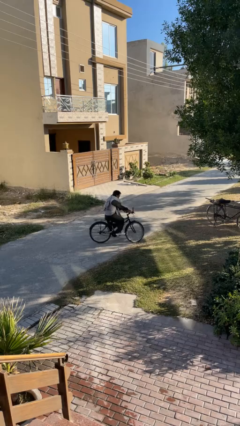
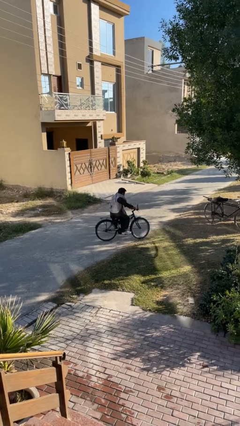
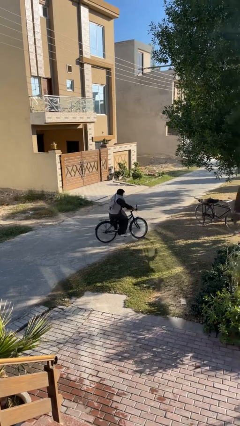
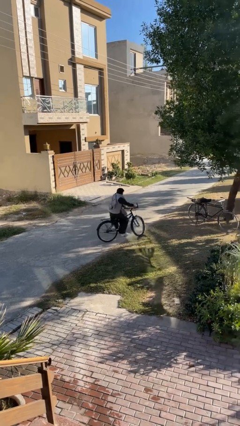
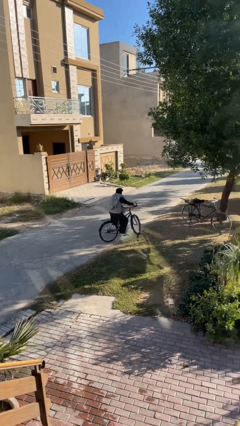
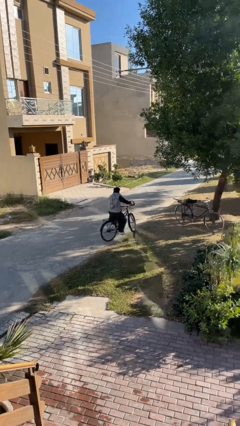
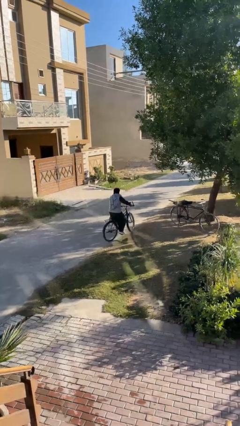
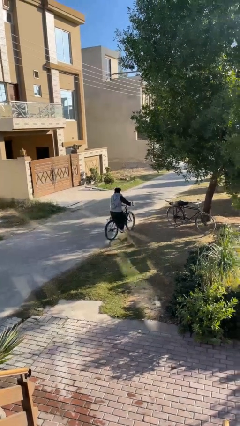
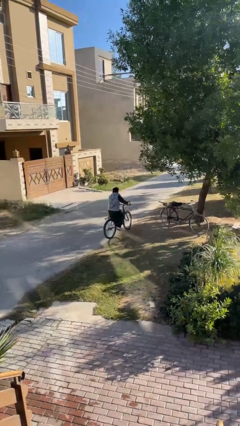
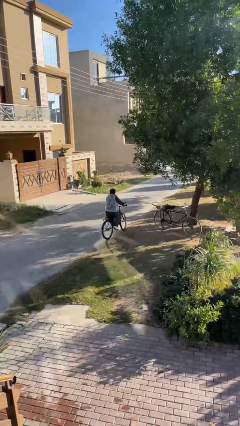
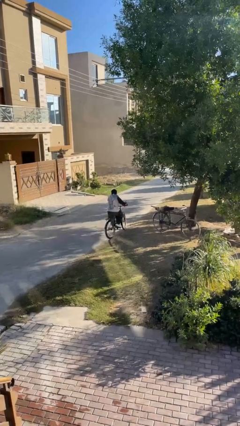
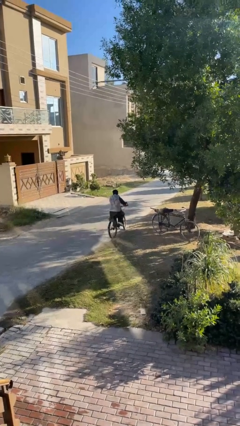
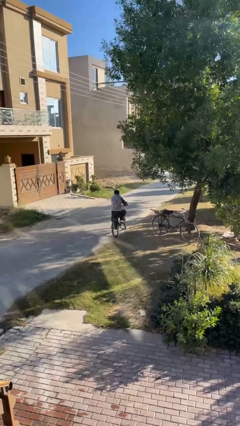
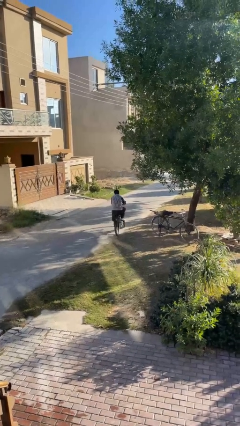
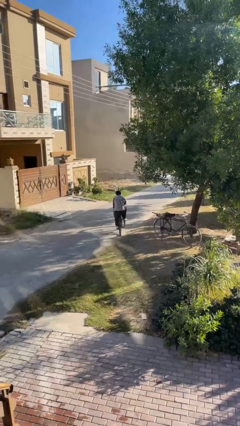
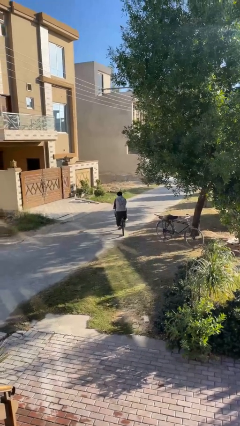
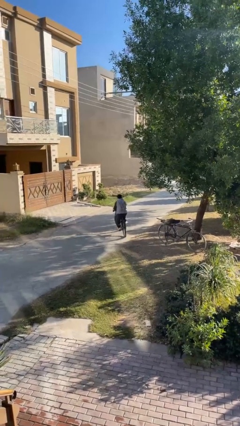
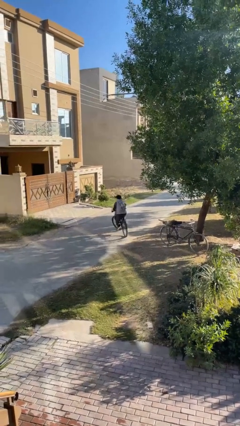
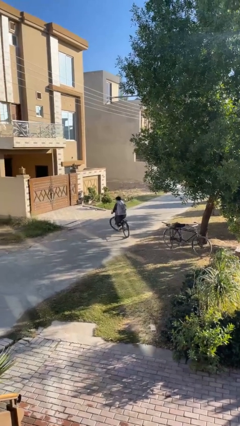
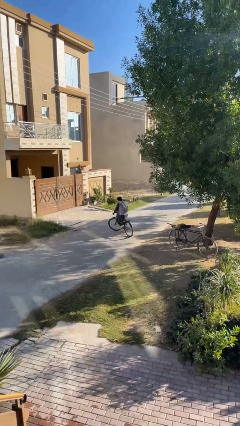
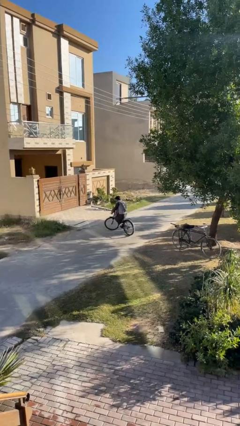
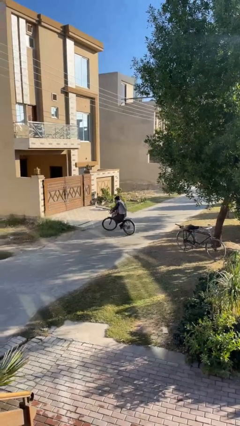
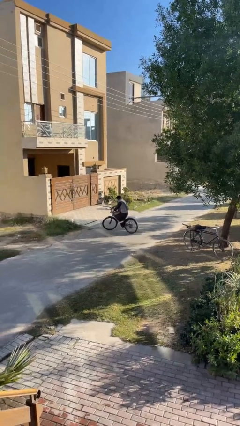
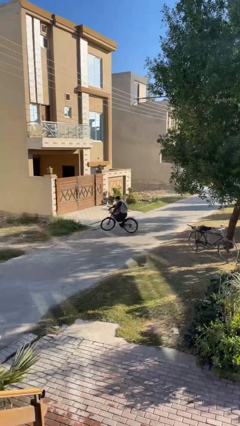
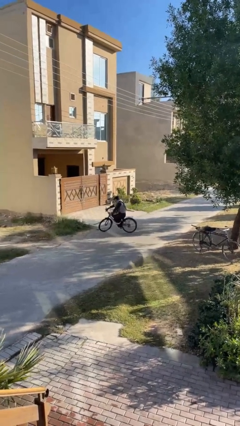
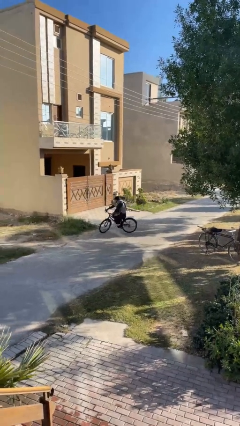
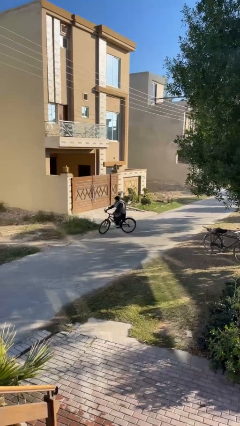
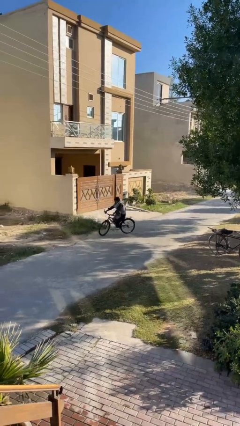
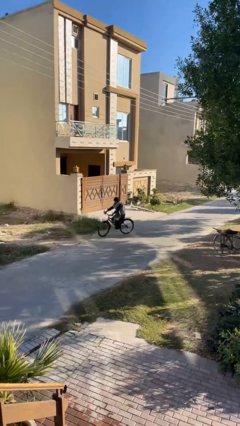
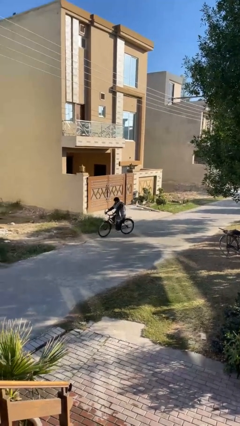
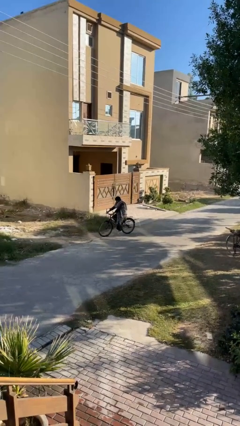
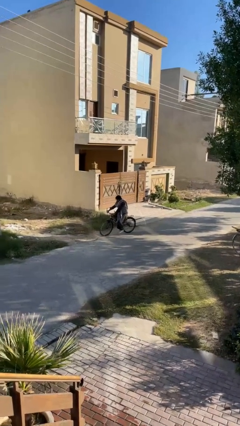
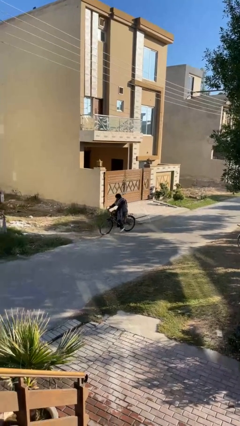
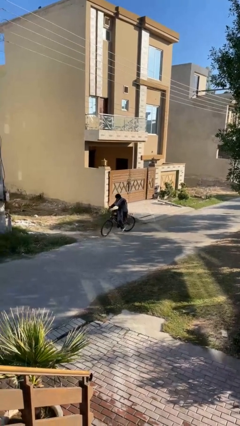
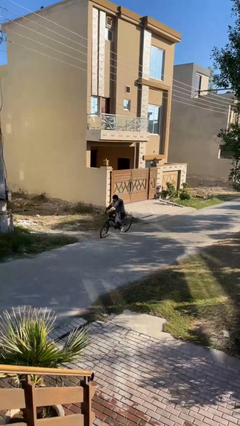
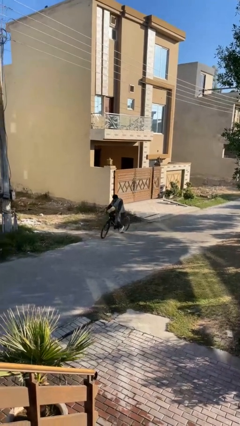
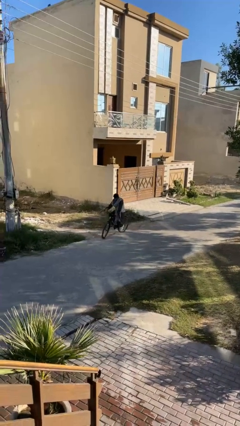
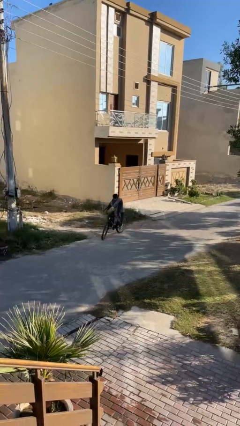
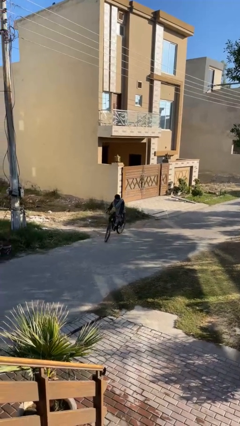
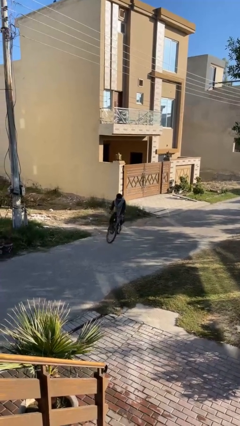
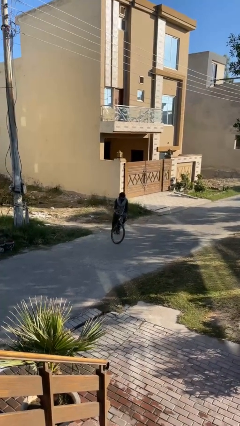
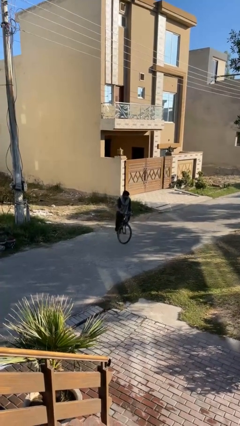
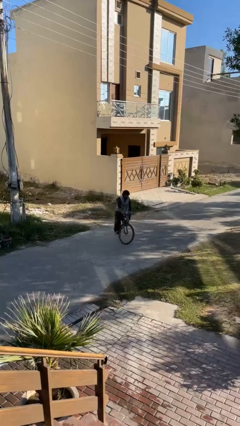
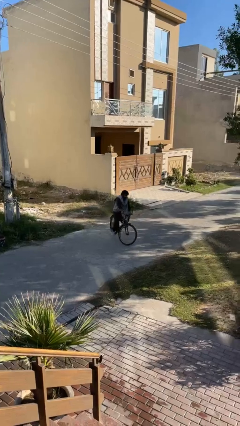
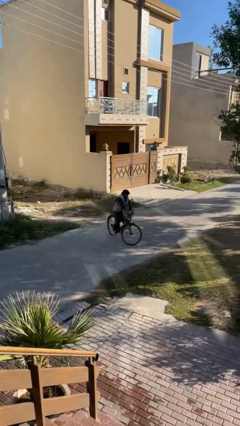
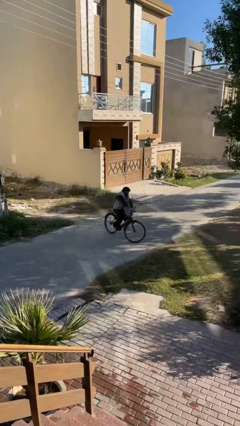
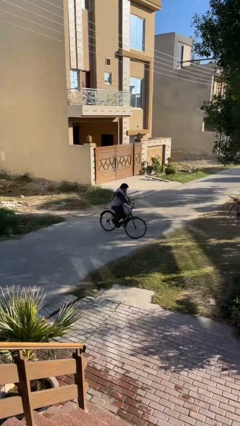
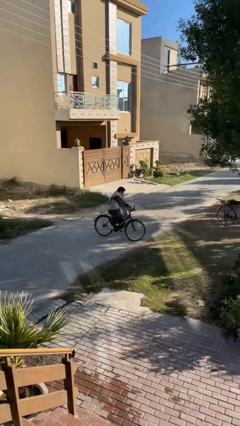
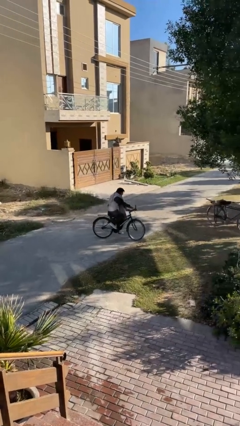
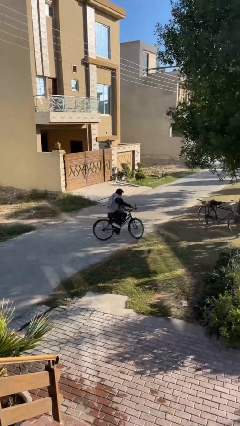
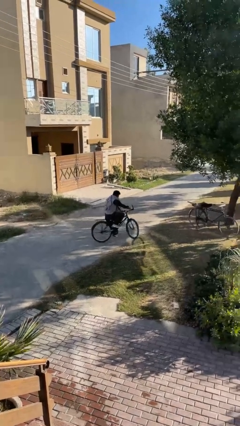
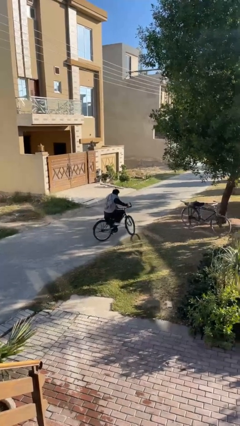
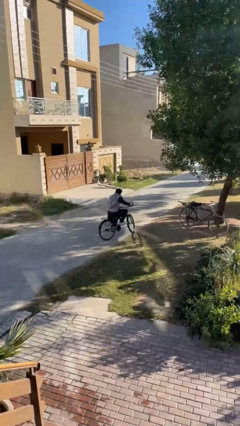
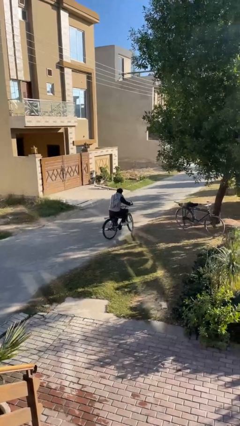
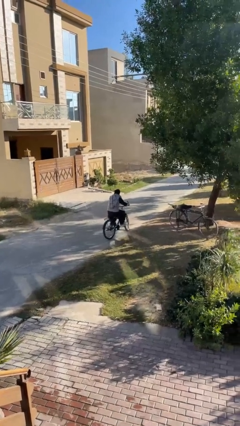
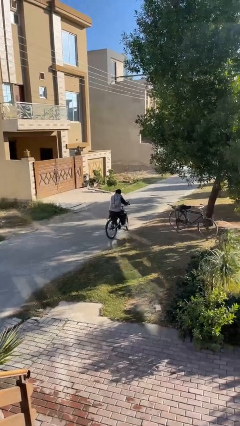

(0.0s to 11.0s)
person rides bicycle

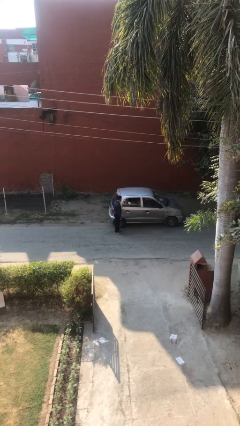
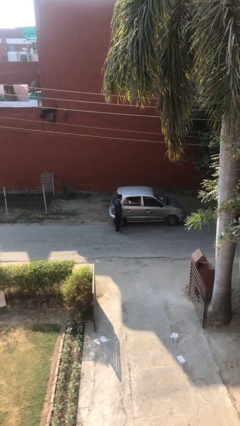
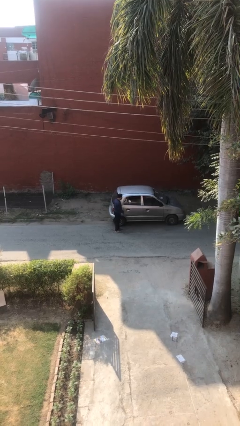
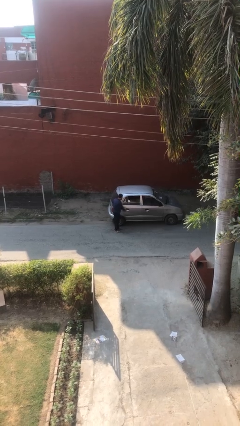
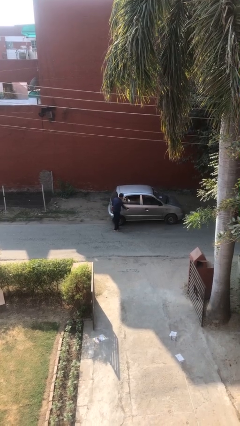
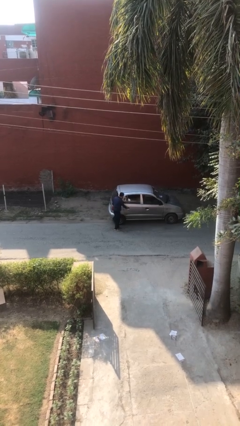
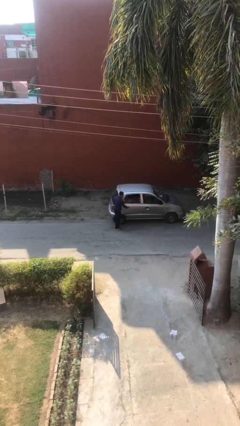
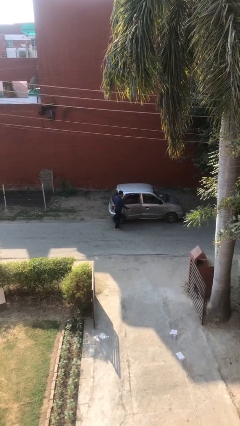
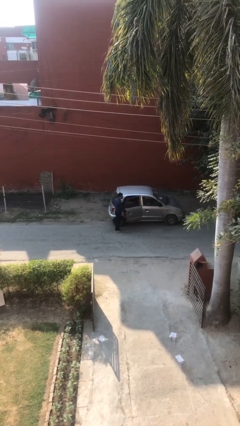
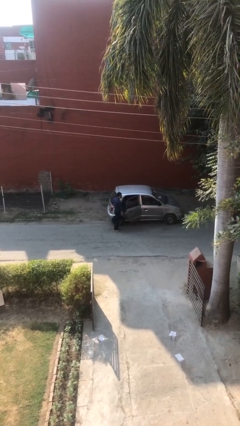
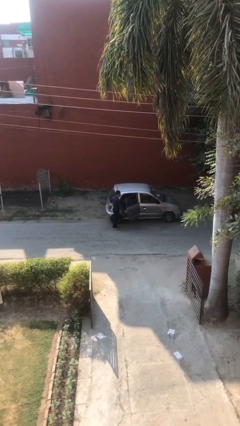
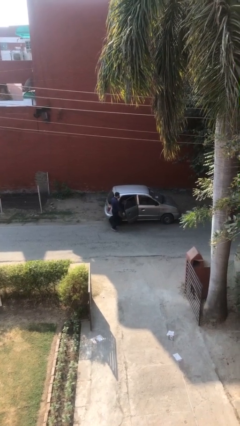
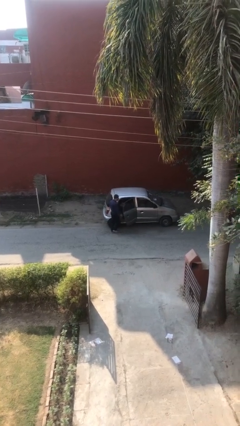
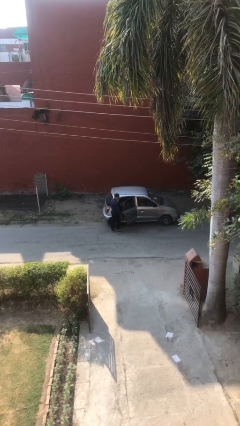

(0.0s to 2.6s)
person opens car door

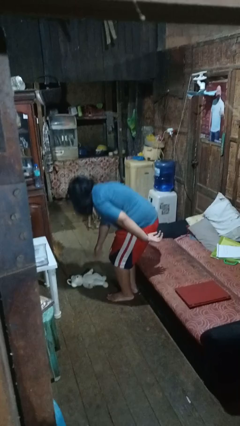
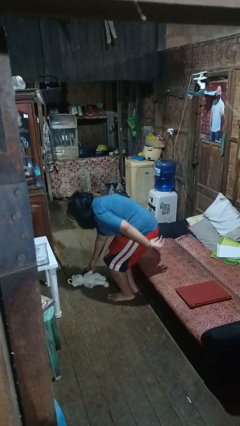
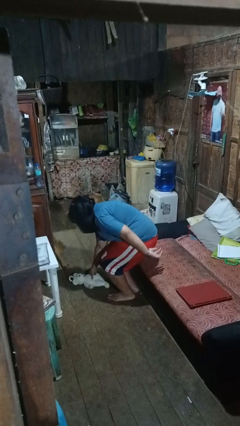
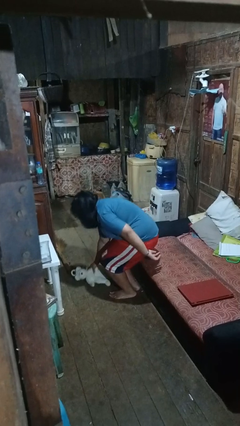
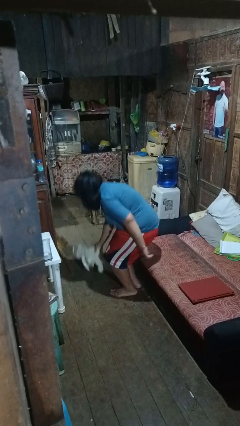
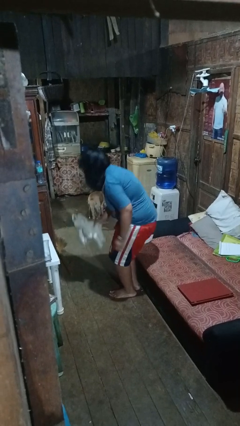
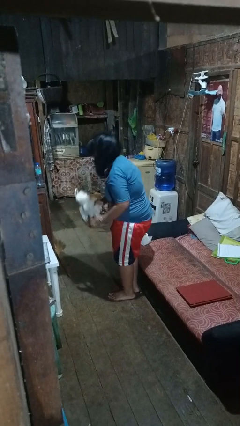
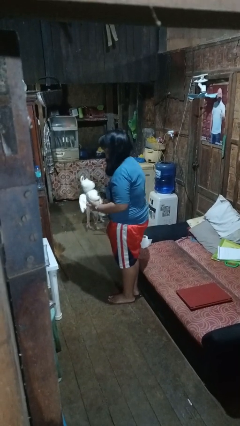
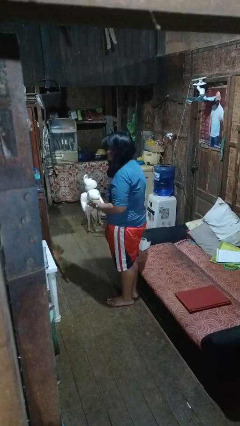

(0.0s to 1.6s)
person picks up object from floor

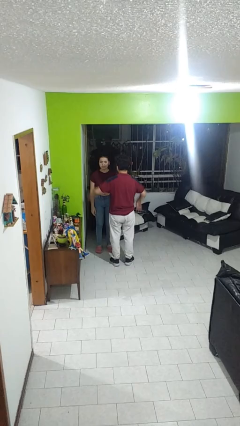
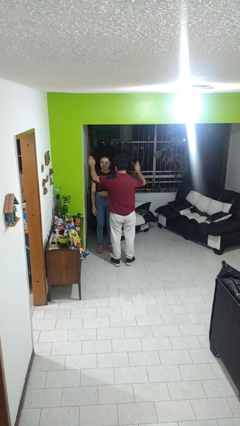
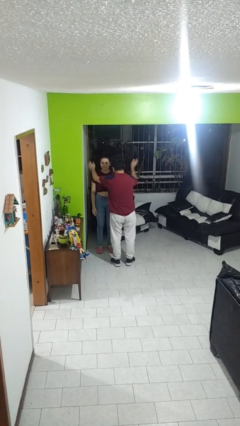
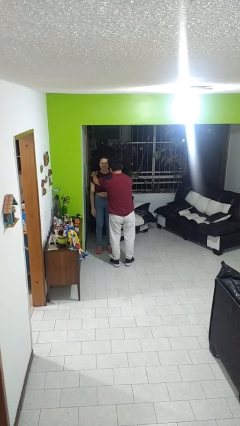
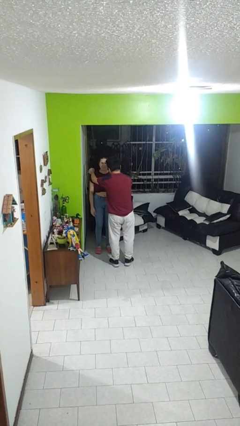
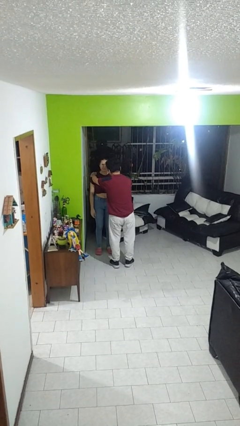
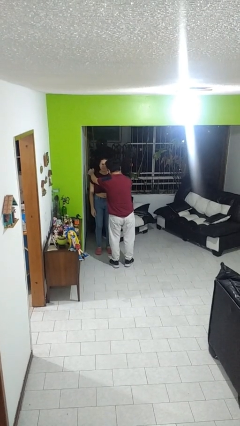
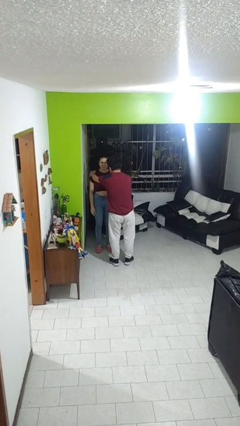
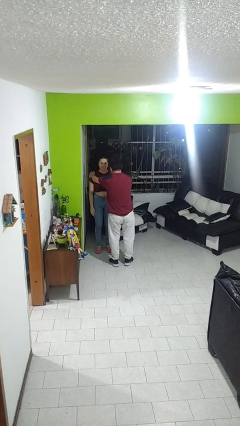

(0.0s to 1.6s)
person pounds shoulders of person

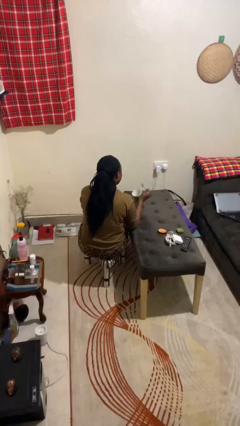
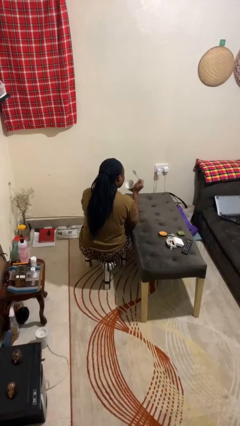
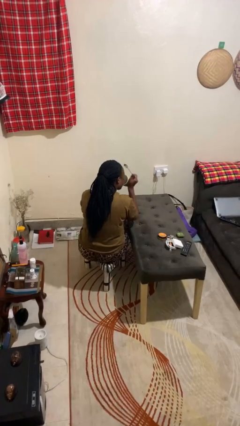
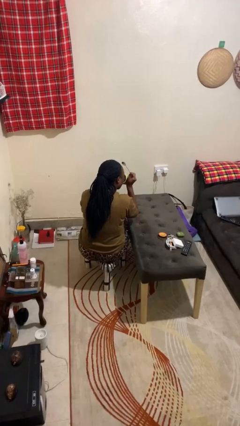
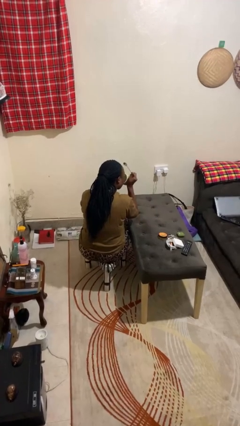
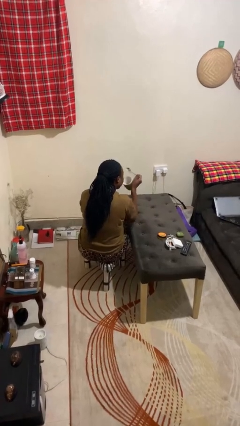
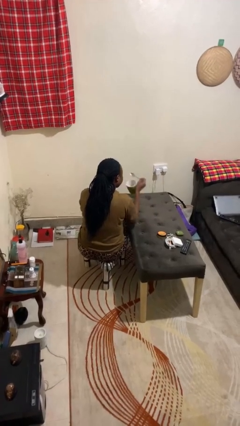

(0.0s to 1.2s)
person drinks from mug
